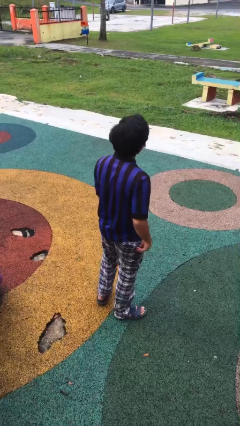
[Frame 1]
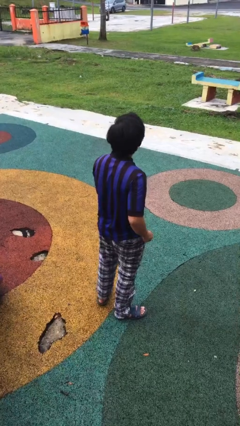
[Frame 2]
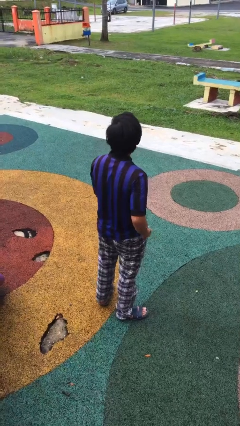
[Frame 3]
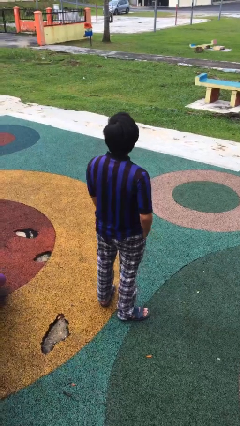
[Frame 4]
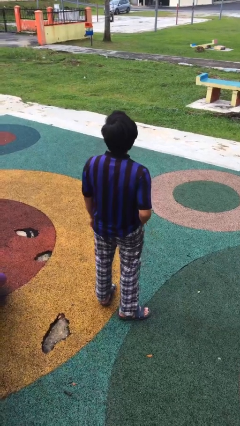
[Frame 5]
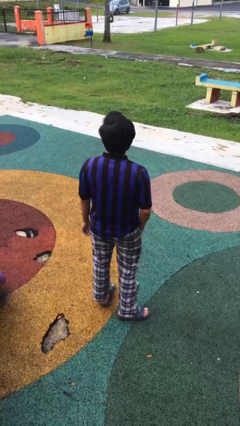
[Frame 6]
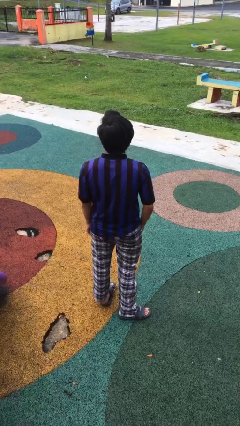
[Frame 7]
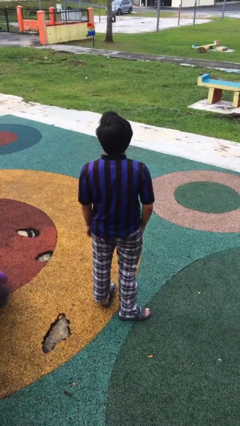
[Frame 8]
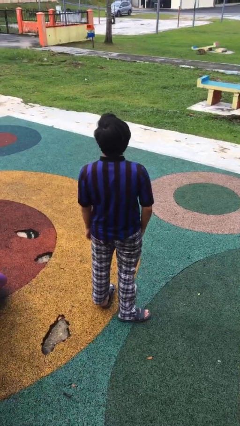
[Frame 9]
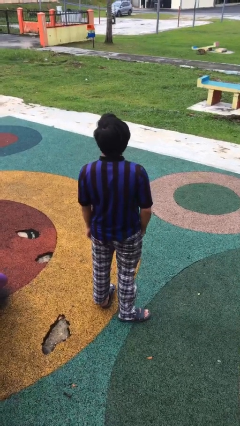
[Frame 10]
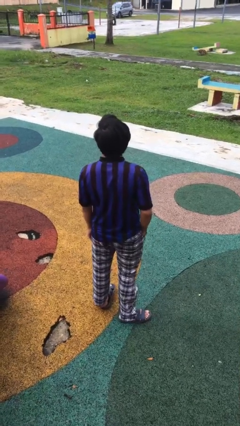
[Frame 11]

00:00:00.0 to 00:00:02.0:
person puts hands in back pockets

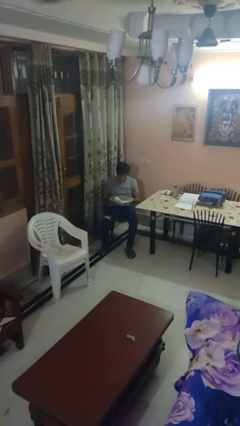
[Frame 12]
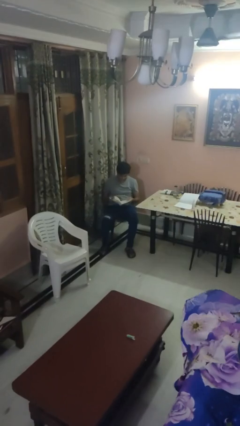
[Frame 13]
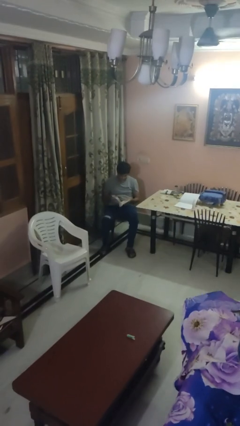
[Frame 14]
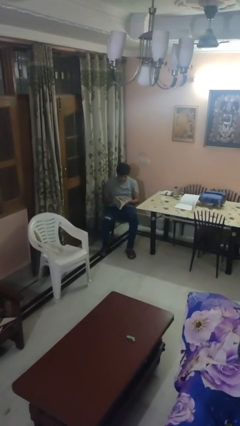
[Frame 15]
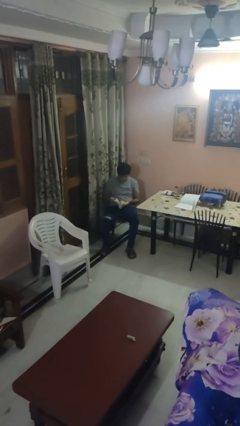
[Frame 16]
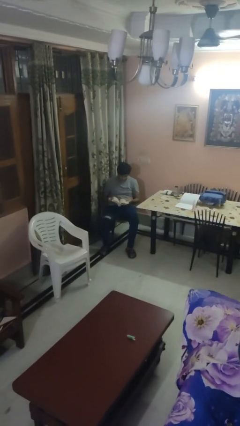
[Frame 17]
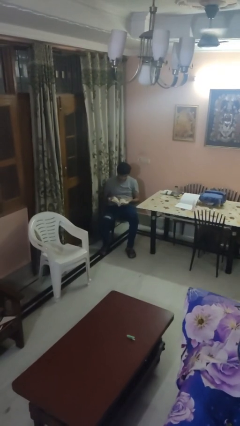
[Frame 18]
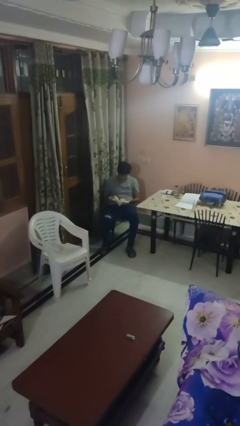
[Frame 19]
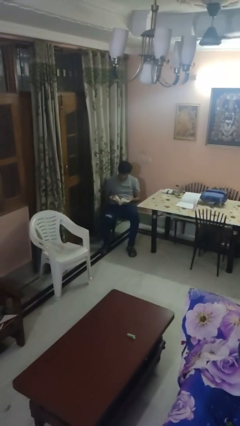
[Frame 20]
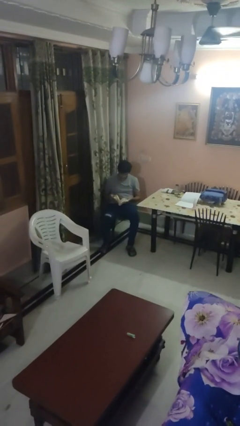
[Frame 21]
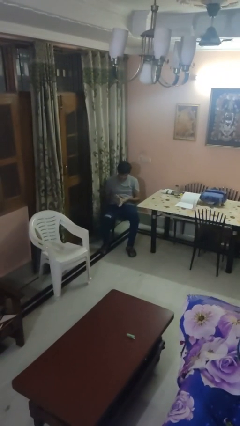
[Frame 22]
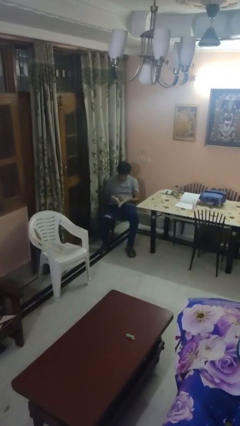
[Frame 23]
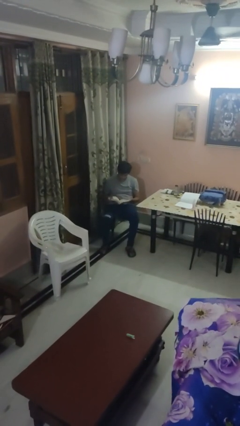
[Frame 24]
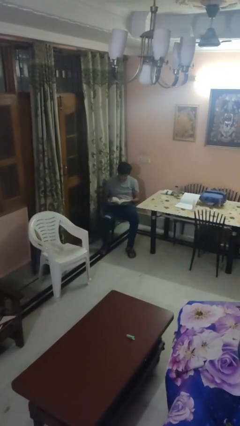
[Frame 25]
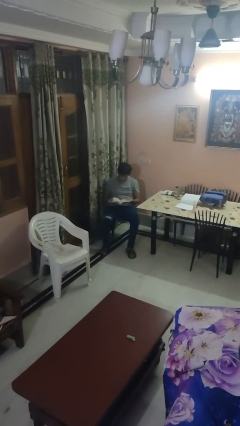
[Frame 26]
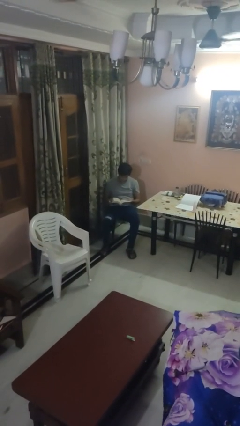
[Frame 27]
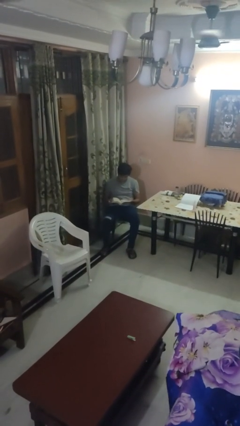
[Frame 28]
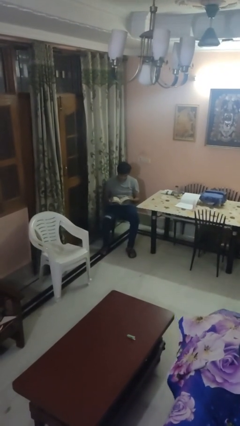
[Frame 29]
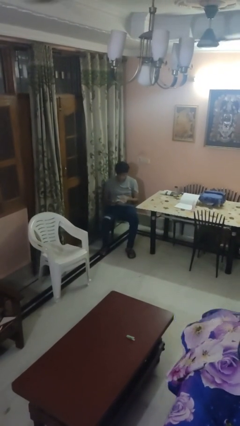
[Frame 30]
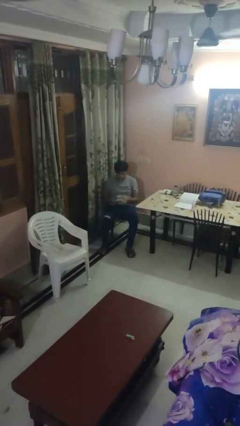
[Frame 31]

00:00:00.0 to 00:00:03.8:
person reads book

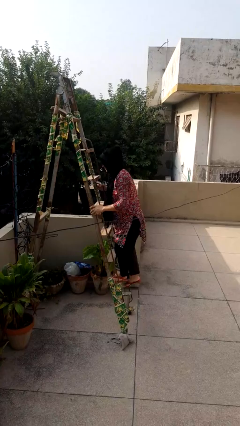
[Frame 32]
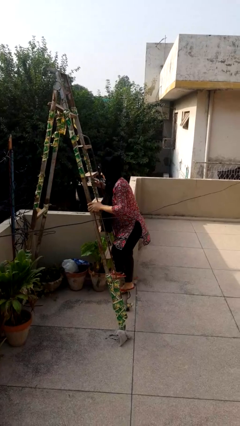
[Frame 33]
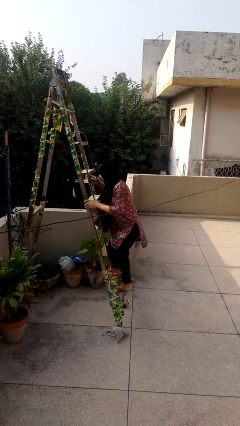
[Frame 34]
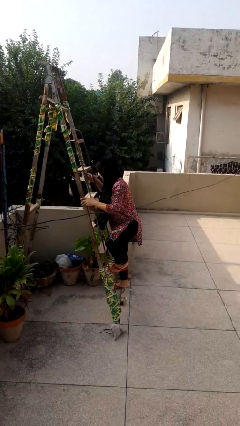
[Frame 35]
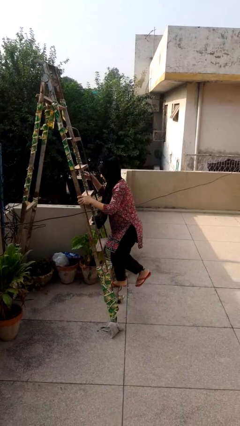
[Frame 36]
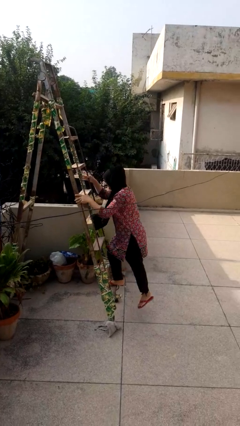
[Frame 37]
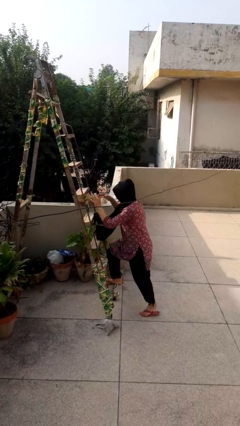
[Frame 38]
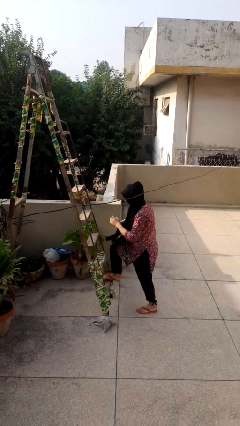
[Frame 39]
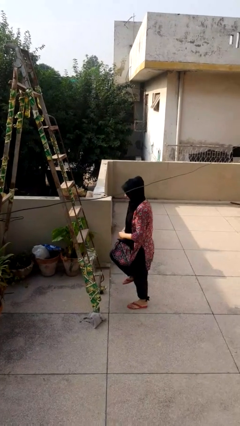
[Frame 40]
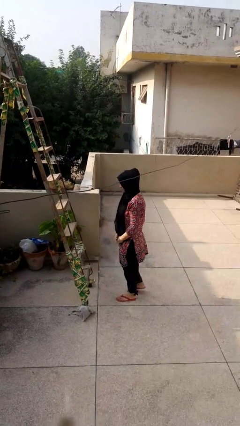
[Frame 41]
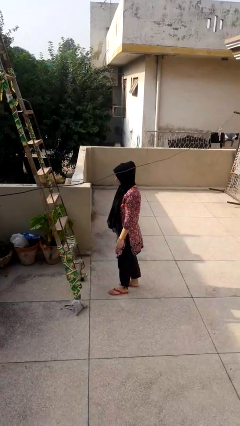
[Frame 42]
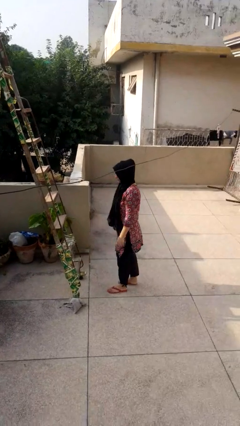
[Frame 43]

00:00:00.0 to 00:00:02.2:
person climbs down ladder

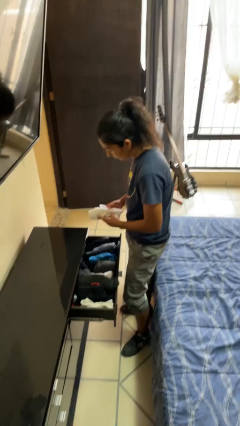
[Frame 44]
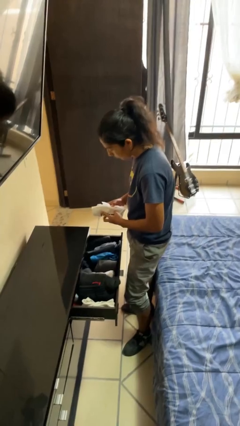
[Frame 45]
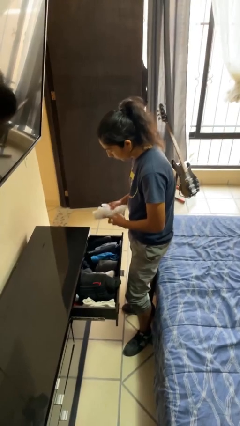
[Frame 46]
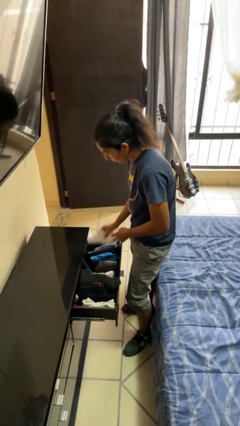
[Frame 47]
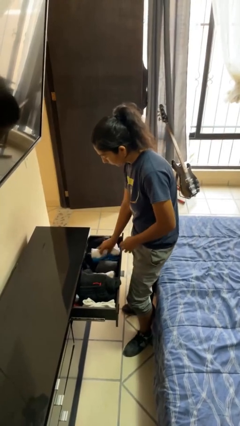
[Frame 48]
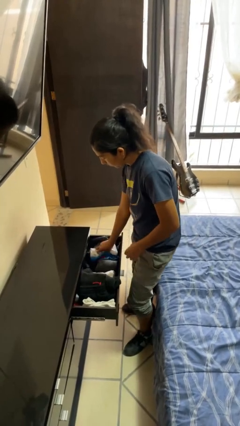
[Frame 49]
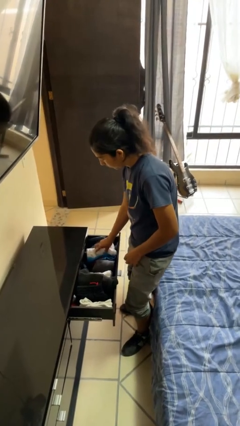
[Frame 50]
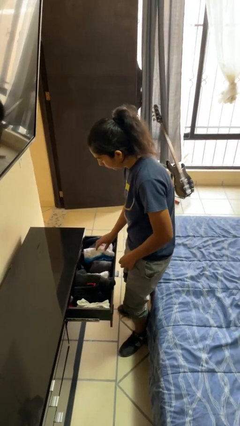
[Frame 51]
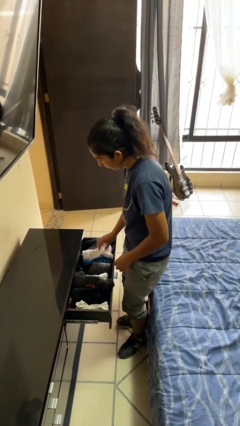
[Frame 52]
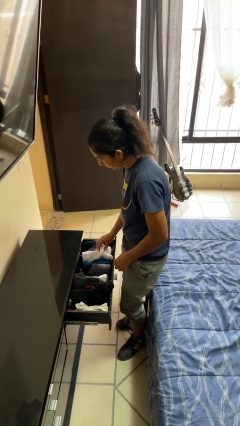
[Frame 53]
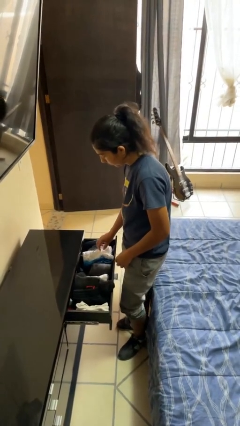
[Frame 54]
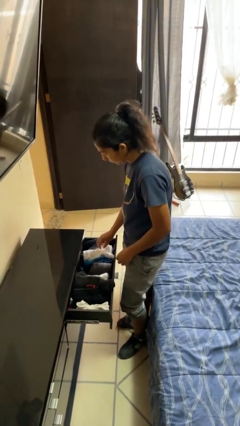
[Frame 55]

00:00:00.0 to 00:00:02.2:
person puts clothes into dresser

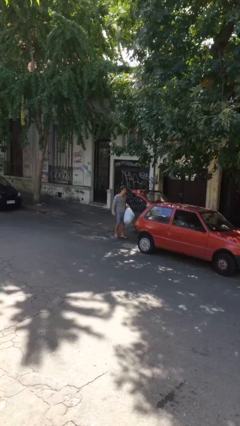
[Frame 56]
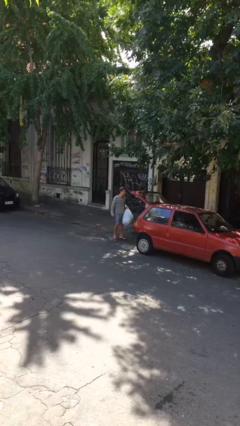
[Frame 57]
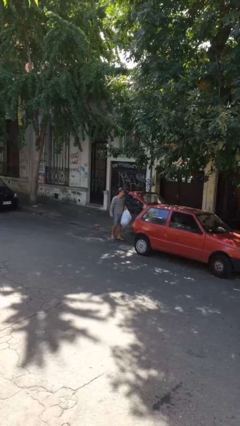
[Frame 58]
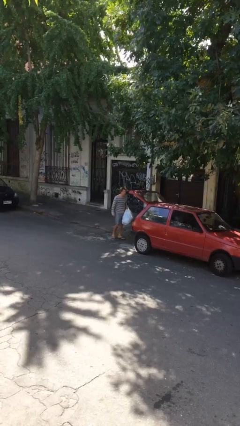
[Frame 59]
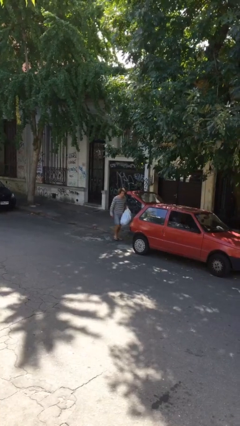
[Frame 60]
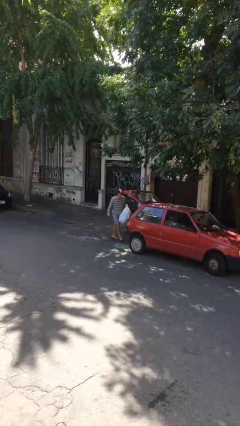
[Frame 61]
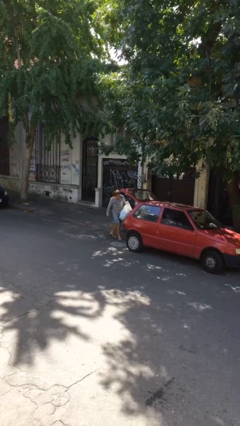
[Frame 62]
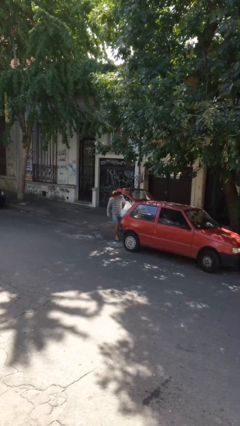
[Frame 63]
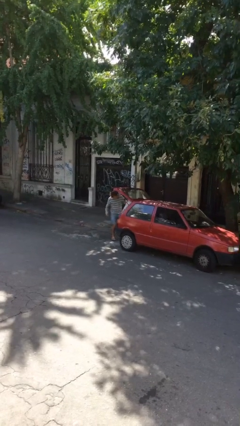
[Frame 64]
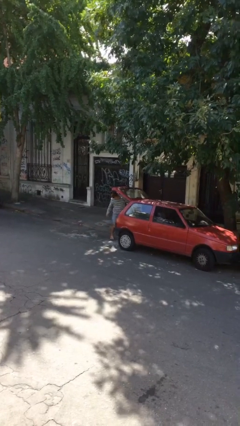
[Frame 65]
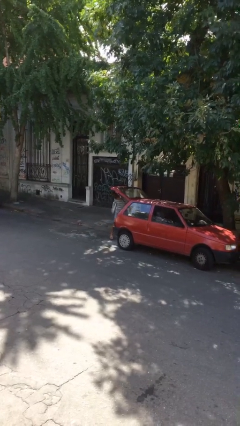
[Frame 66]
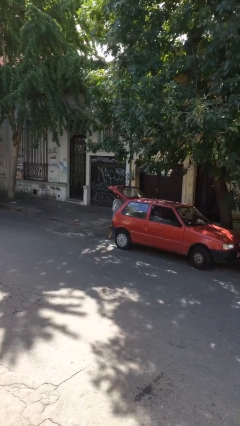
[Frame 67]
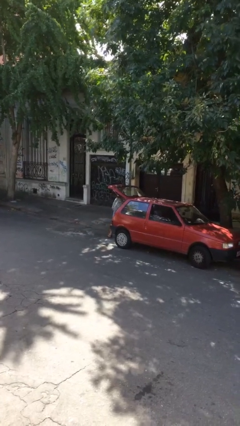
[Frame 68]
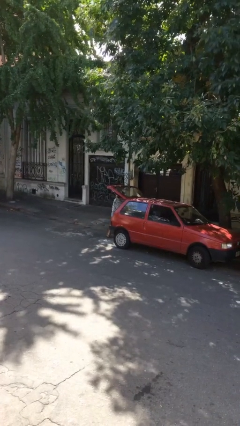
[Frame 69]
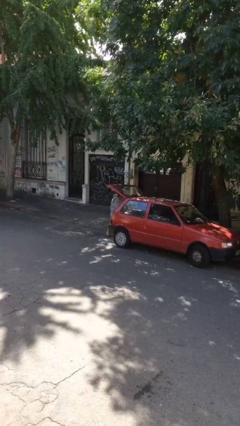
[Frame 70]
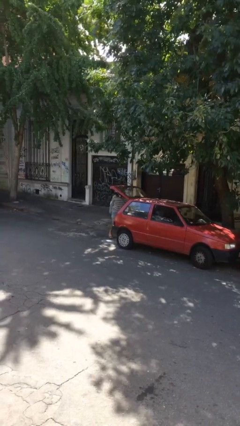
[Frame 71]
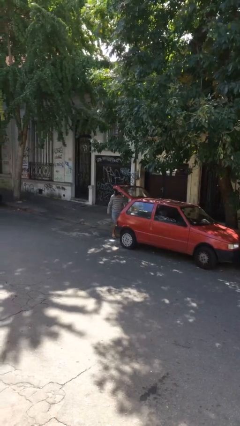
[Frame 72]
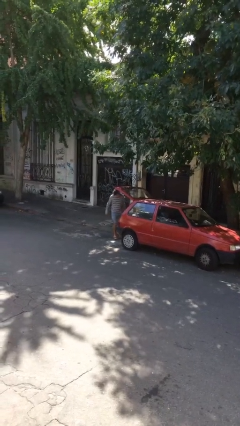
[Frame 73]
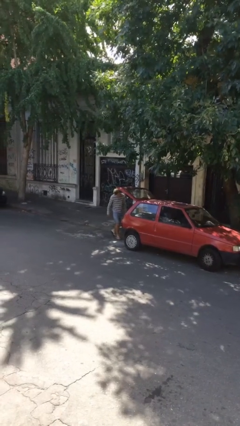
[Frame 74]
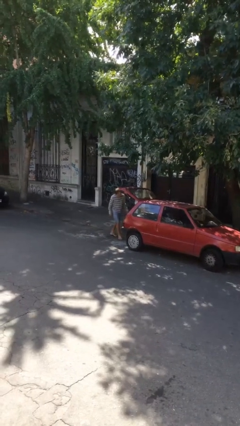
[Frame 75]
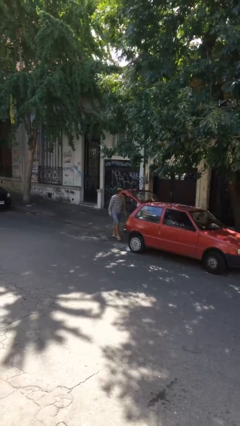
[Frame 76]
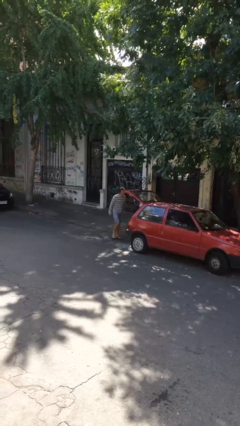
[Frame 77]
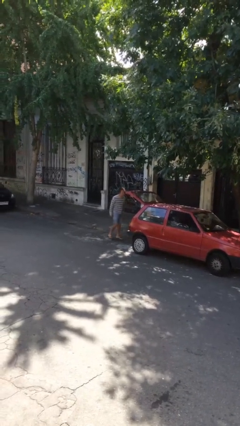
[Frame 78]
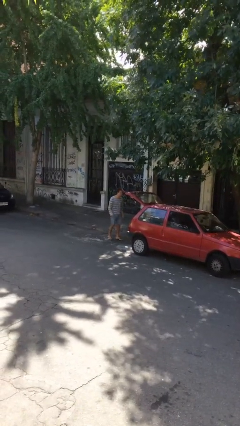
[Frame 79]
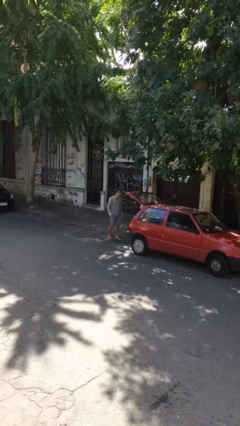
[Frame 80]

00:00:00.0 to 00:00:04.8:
person loads car

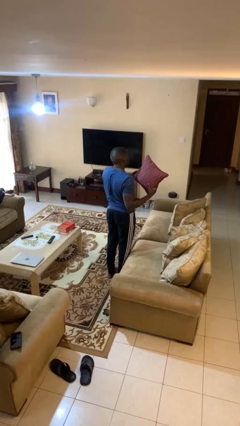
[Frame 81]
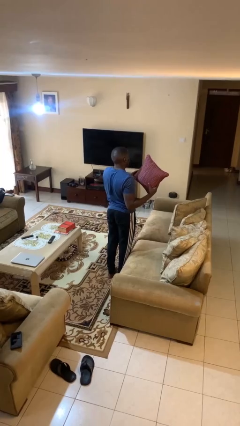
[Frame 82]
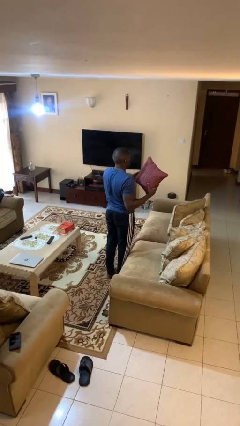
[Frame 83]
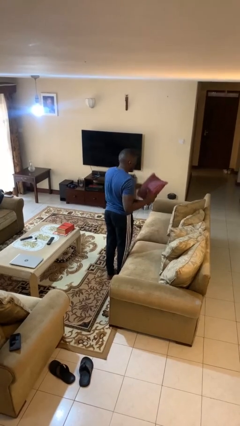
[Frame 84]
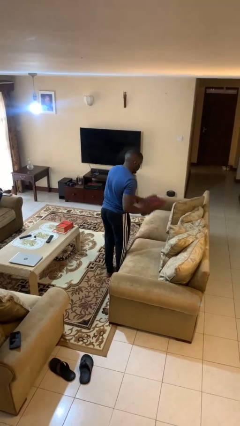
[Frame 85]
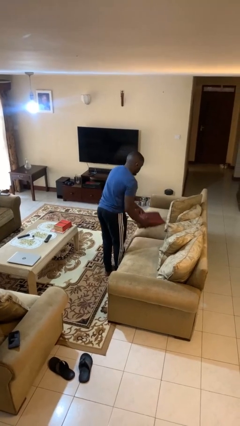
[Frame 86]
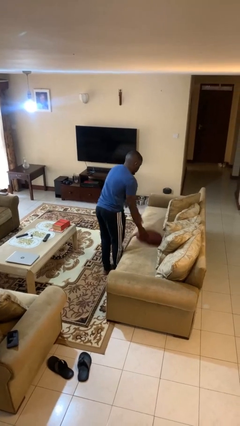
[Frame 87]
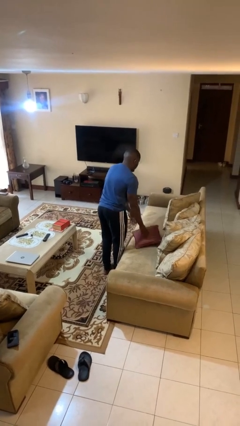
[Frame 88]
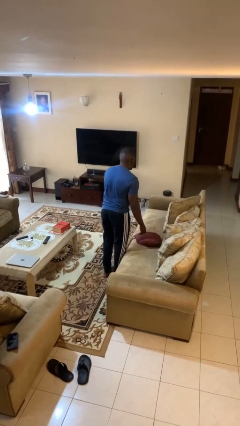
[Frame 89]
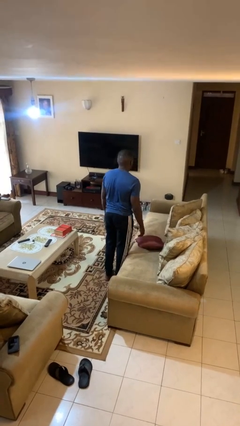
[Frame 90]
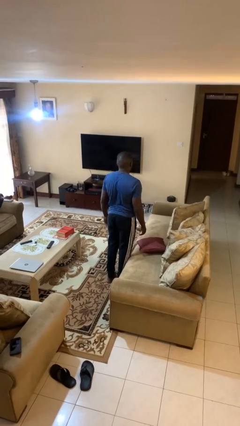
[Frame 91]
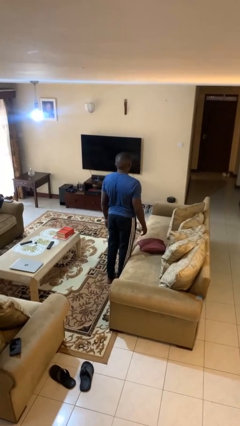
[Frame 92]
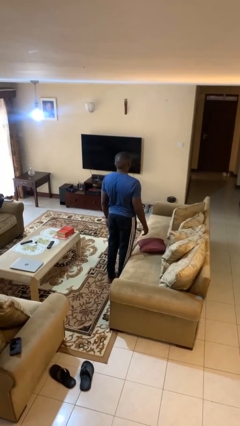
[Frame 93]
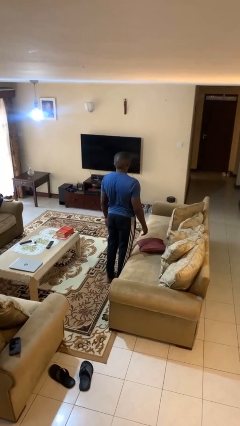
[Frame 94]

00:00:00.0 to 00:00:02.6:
person puts down object on couch
